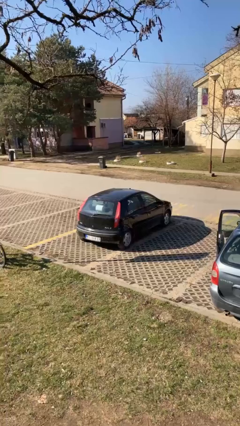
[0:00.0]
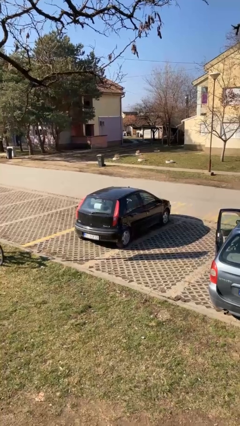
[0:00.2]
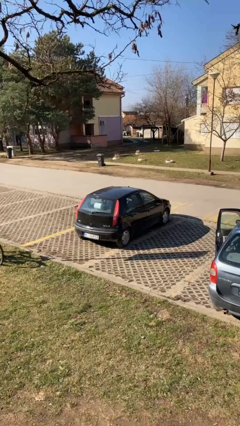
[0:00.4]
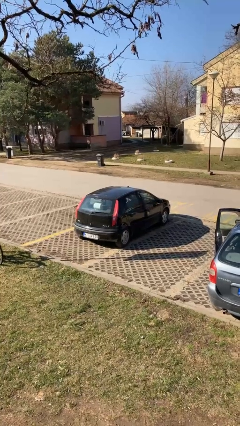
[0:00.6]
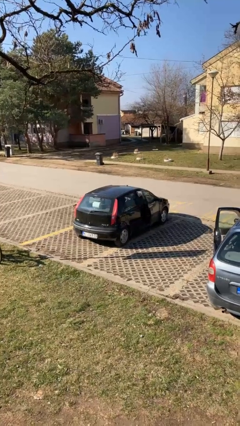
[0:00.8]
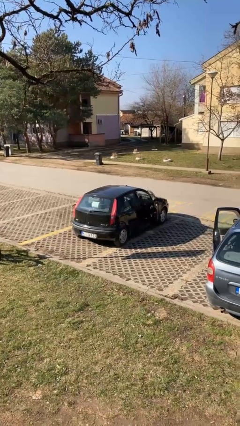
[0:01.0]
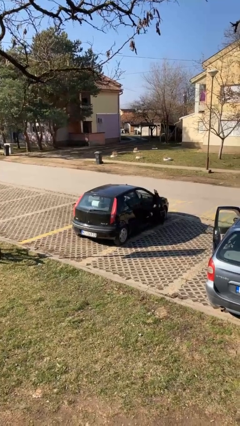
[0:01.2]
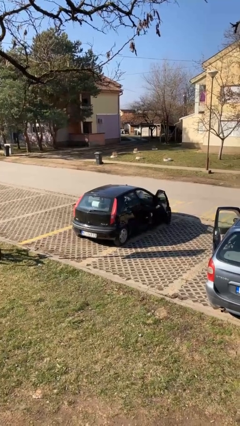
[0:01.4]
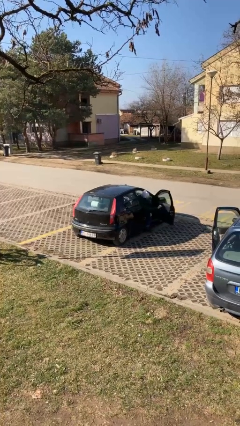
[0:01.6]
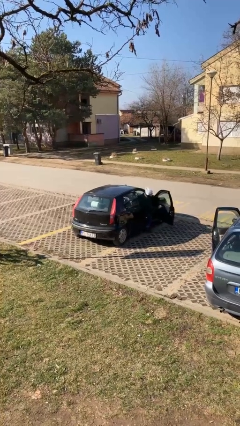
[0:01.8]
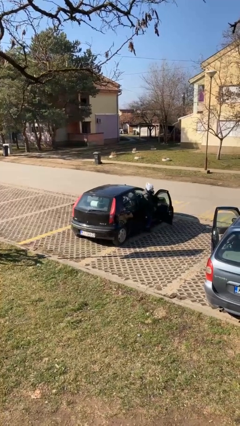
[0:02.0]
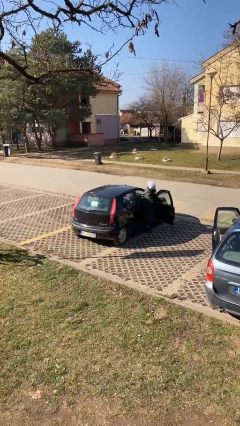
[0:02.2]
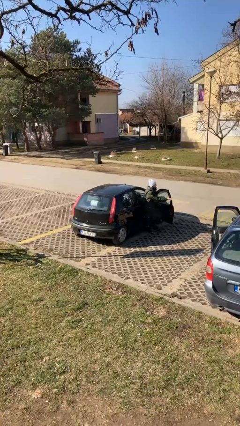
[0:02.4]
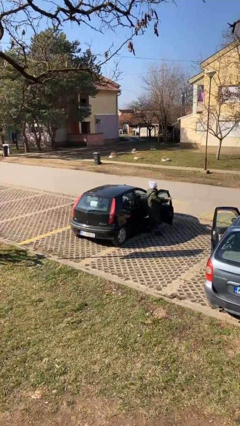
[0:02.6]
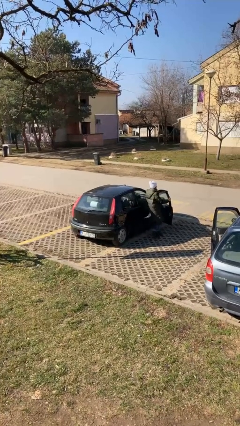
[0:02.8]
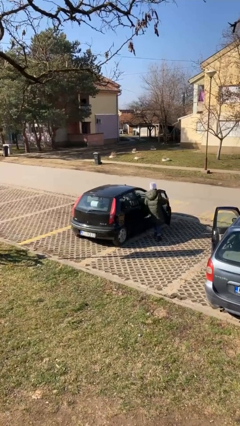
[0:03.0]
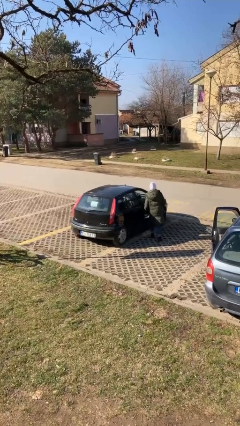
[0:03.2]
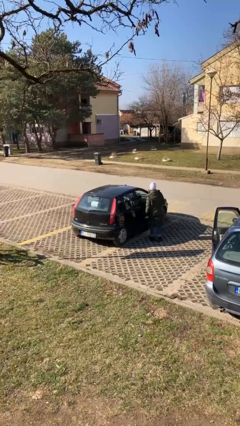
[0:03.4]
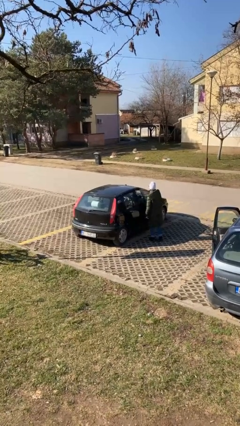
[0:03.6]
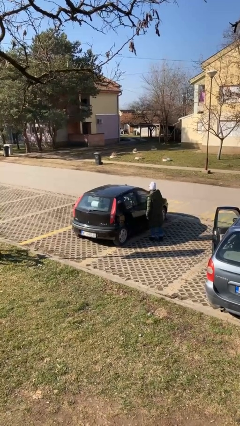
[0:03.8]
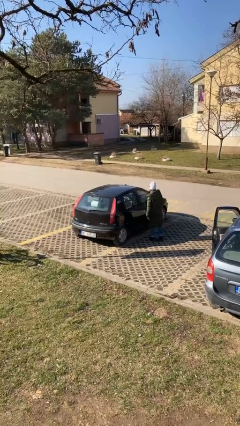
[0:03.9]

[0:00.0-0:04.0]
car drops off person

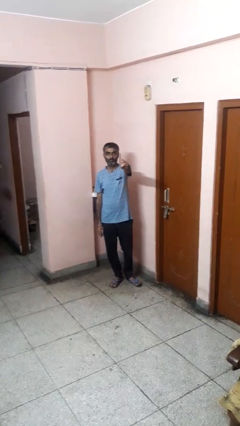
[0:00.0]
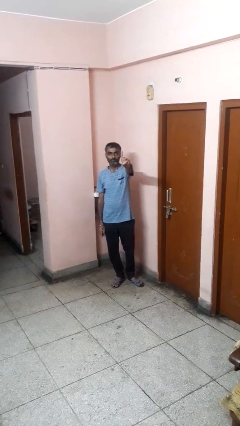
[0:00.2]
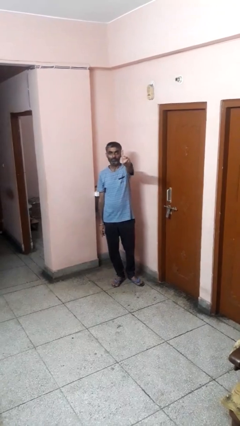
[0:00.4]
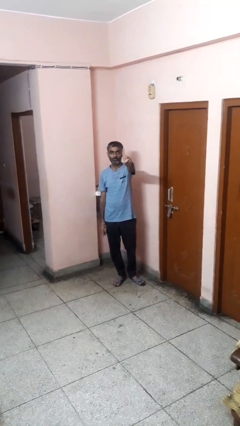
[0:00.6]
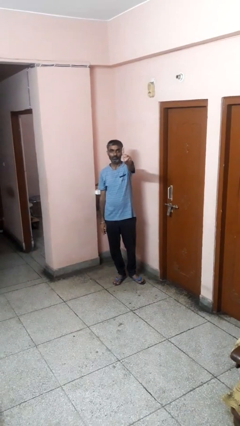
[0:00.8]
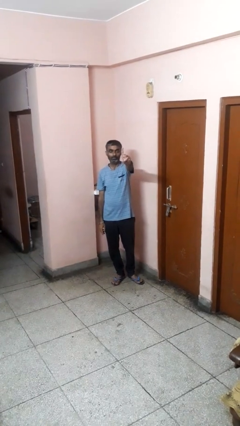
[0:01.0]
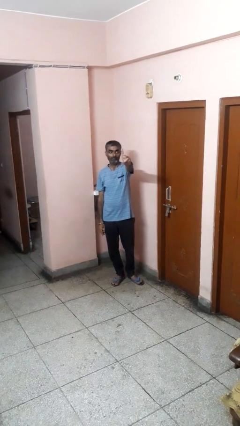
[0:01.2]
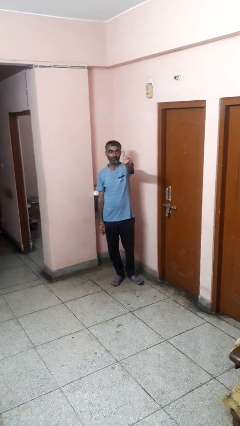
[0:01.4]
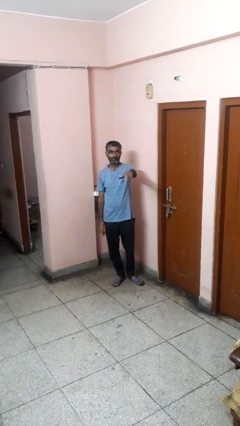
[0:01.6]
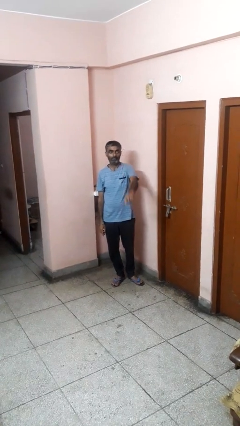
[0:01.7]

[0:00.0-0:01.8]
person gestures number one

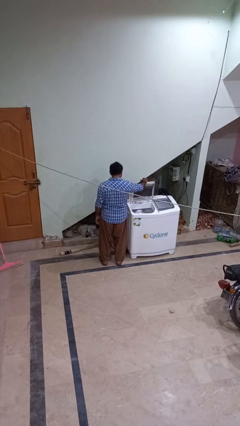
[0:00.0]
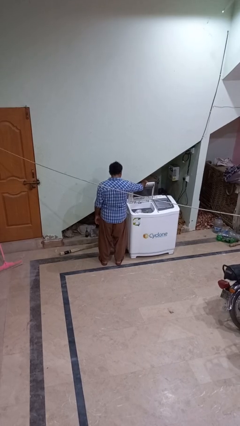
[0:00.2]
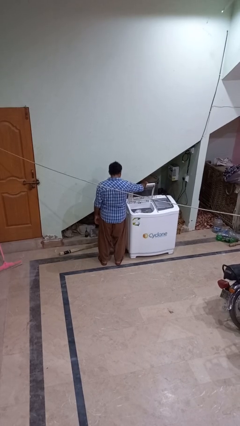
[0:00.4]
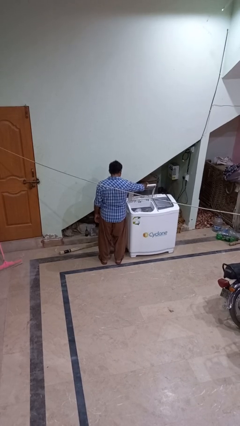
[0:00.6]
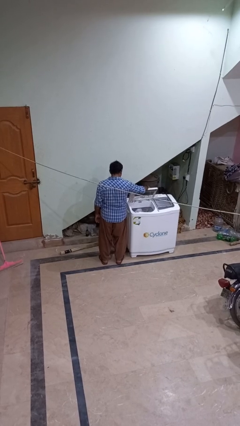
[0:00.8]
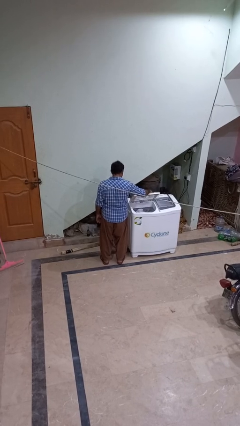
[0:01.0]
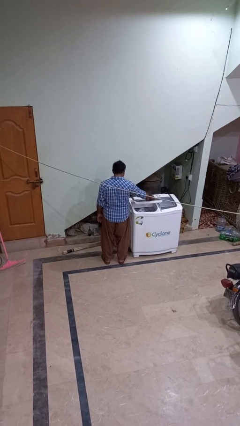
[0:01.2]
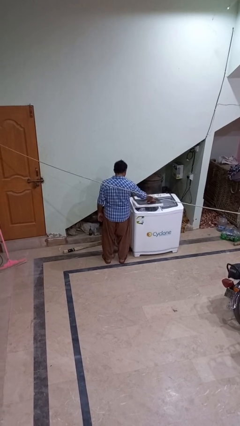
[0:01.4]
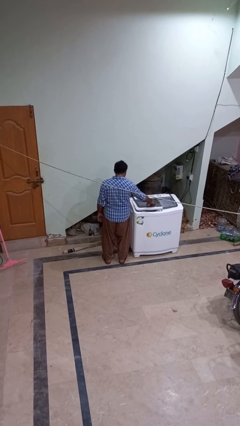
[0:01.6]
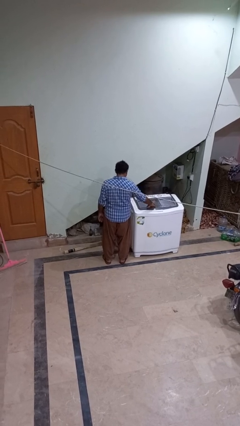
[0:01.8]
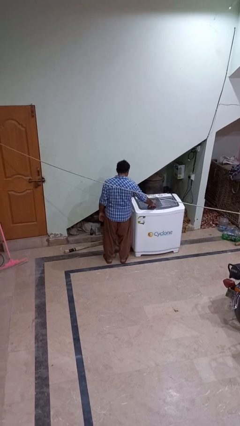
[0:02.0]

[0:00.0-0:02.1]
person closes clothes washer

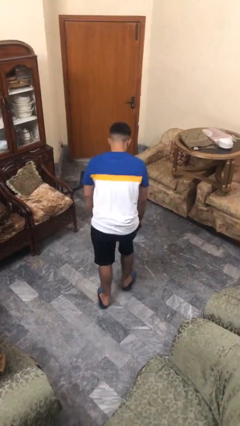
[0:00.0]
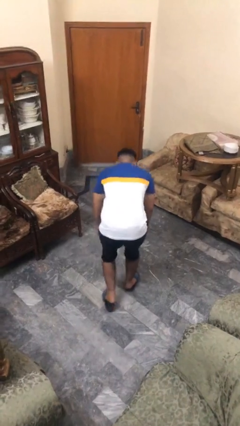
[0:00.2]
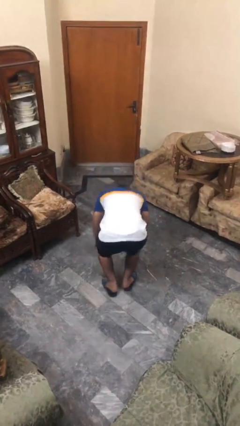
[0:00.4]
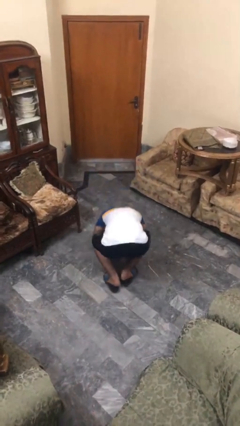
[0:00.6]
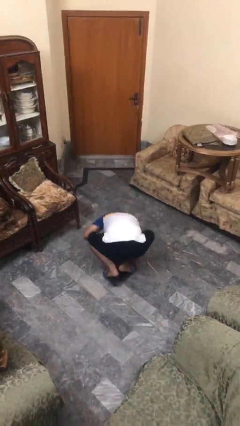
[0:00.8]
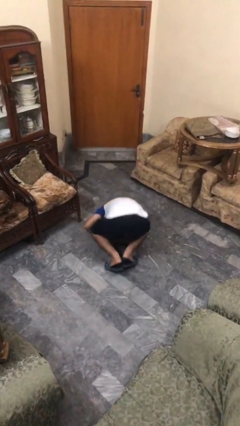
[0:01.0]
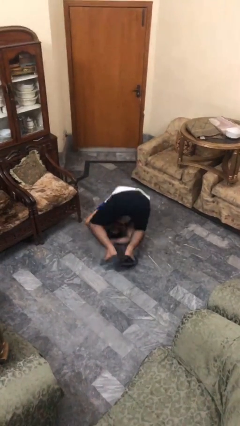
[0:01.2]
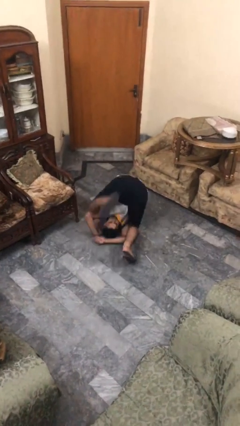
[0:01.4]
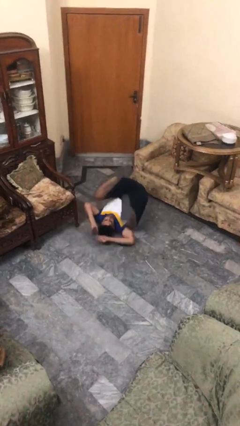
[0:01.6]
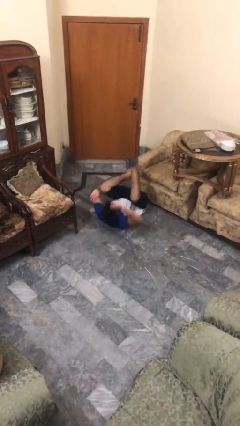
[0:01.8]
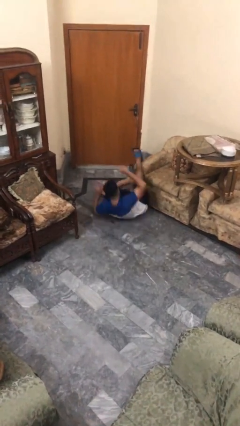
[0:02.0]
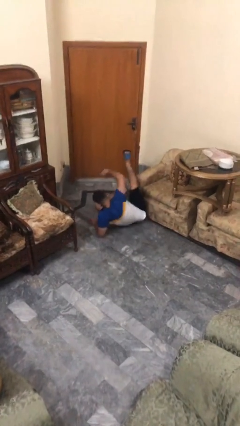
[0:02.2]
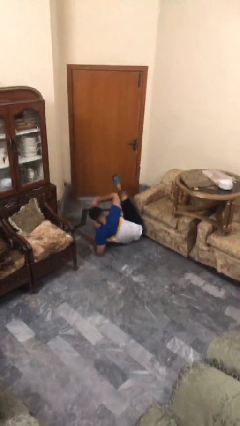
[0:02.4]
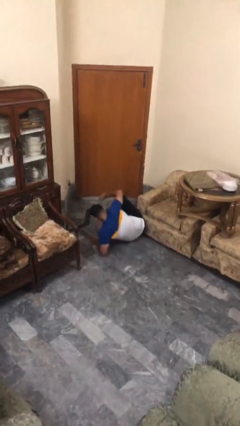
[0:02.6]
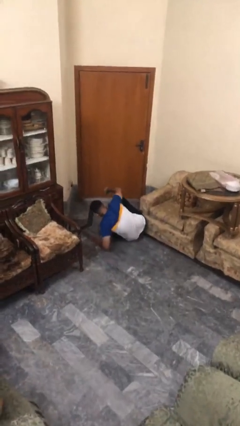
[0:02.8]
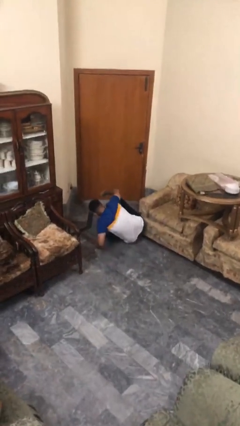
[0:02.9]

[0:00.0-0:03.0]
person somersaults

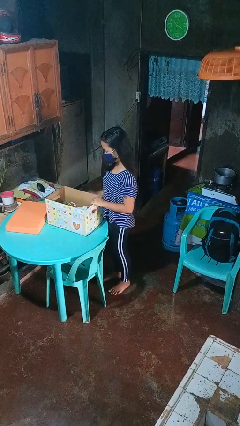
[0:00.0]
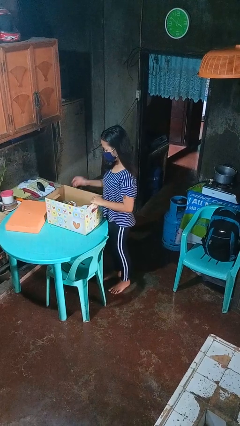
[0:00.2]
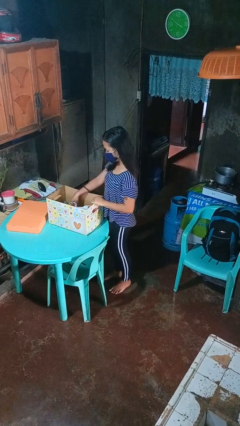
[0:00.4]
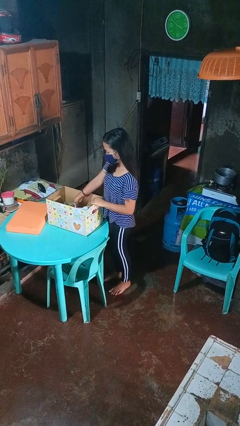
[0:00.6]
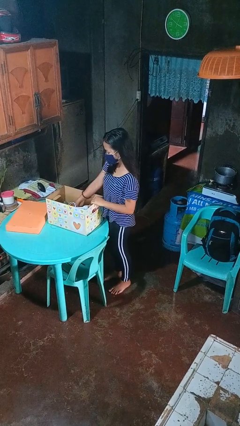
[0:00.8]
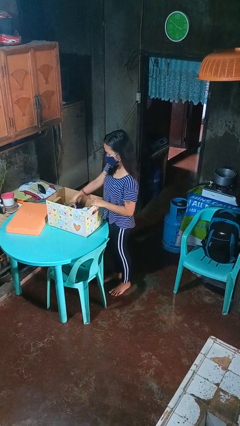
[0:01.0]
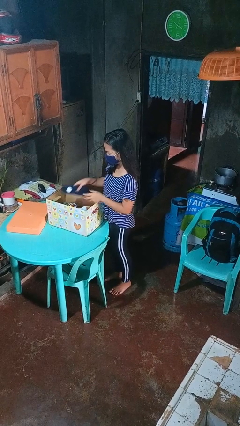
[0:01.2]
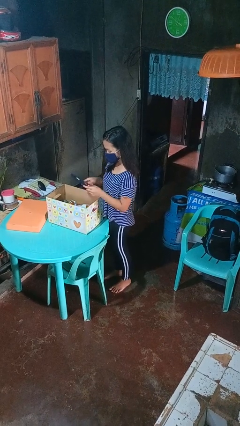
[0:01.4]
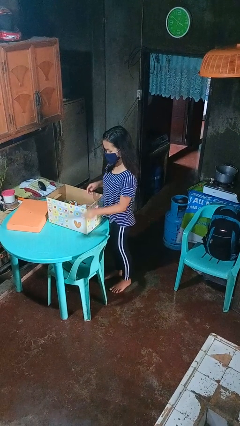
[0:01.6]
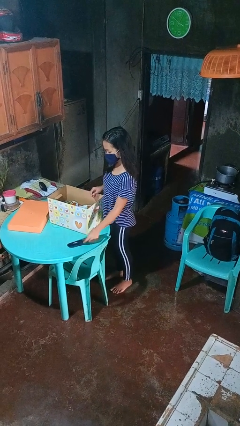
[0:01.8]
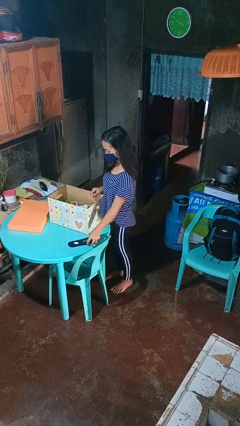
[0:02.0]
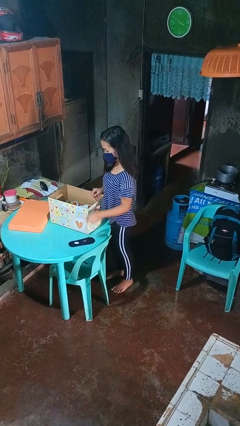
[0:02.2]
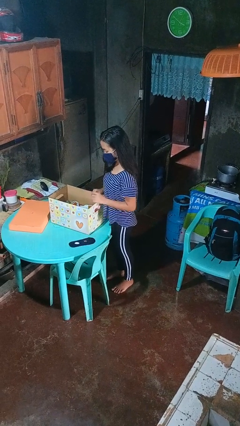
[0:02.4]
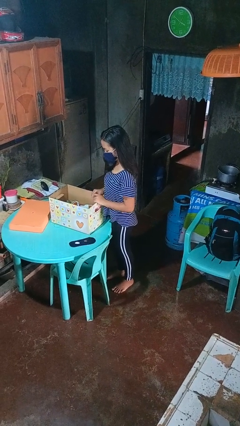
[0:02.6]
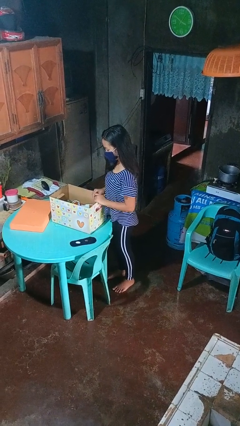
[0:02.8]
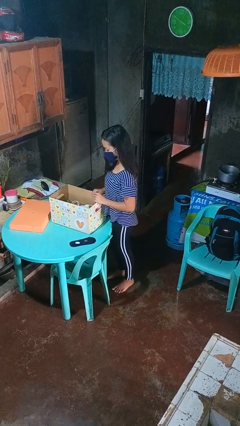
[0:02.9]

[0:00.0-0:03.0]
person takes object from box

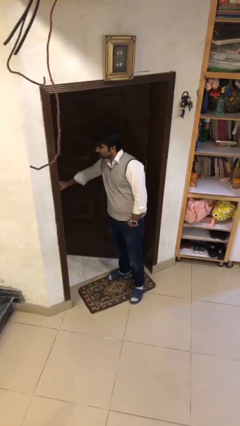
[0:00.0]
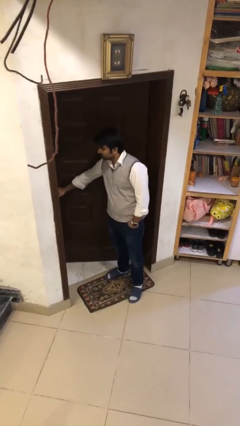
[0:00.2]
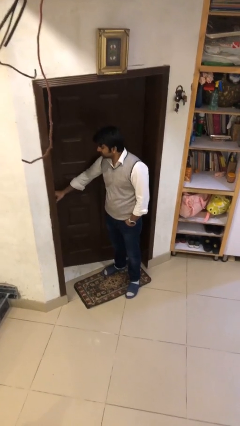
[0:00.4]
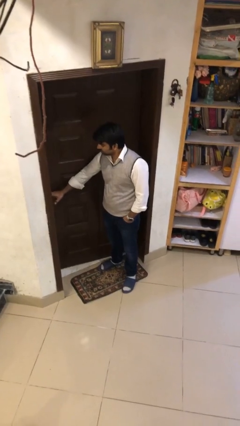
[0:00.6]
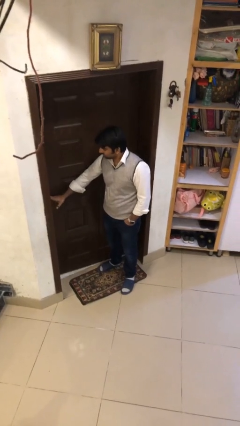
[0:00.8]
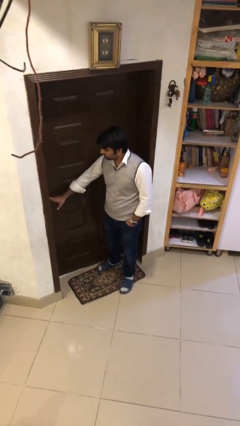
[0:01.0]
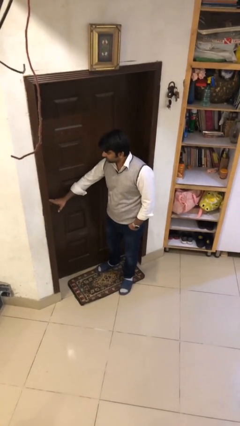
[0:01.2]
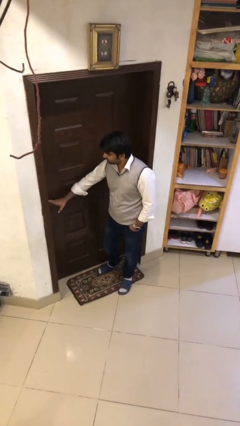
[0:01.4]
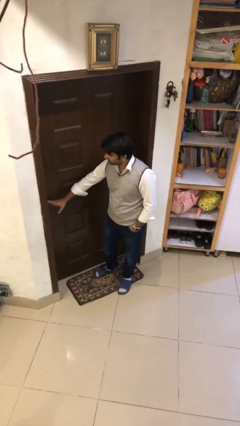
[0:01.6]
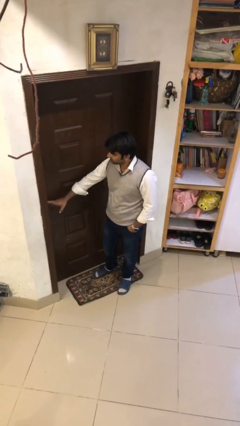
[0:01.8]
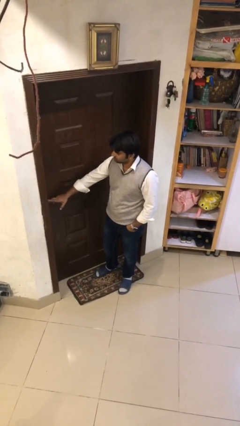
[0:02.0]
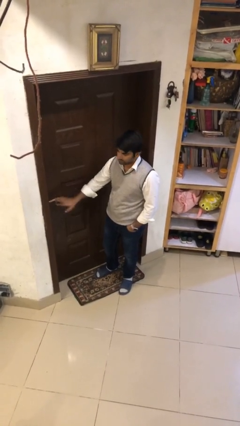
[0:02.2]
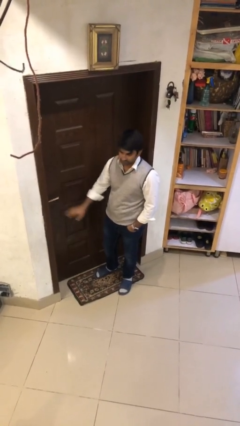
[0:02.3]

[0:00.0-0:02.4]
person closes facility door

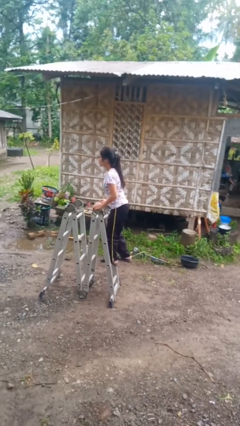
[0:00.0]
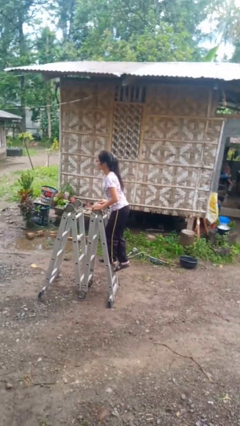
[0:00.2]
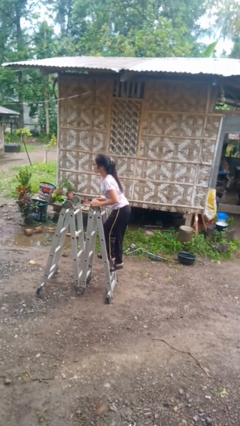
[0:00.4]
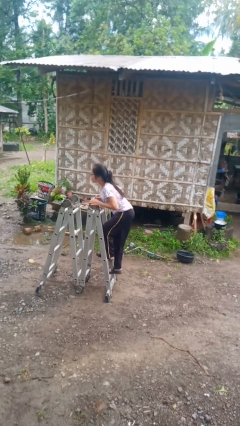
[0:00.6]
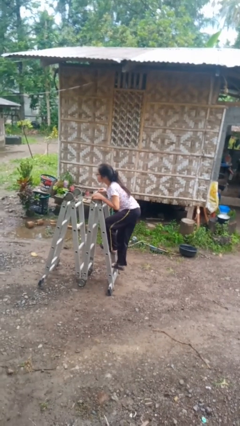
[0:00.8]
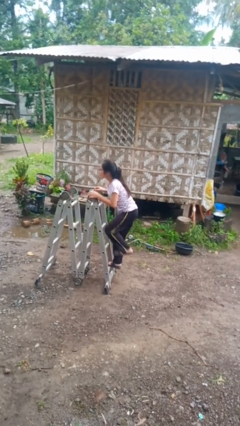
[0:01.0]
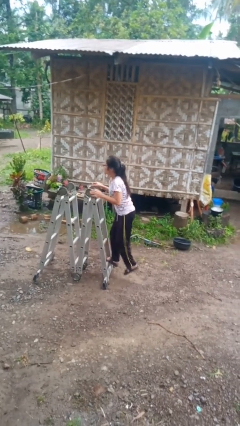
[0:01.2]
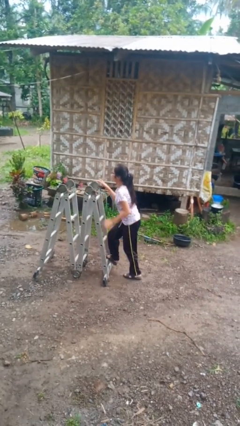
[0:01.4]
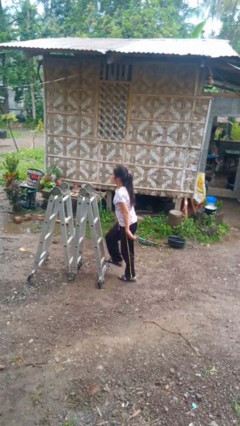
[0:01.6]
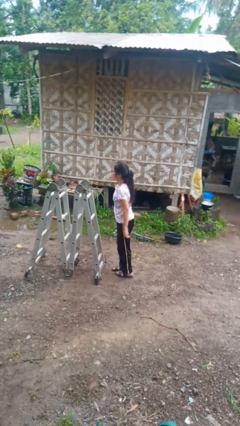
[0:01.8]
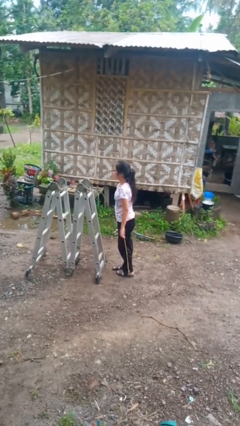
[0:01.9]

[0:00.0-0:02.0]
person climbs down ladder
